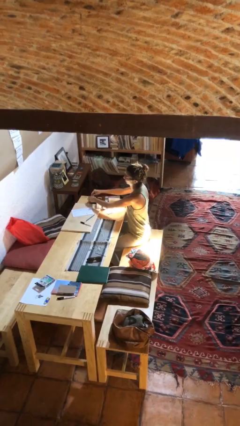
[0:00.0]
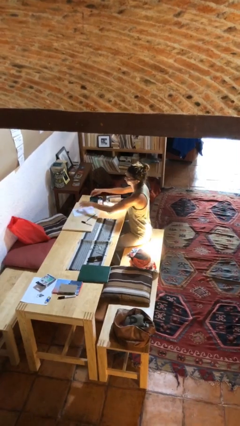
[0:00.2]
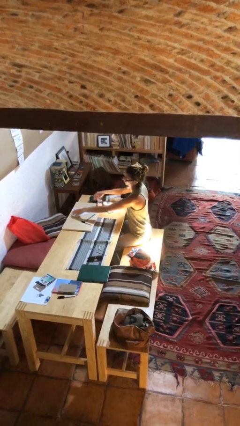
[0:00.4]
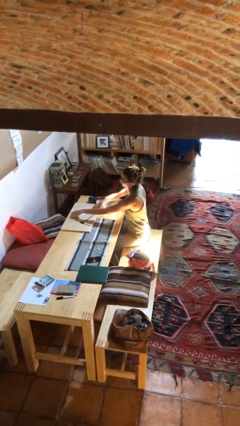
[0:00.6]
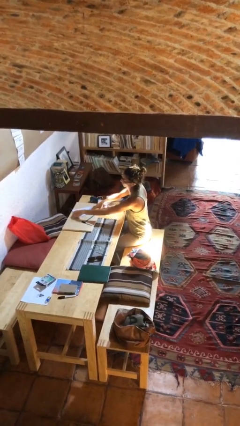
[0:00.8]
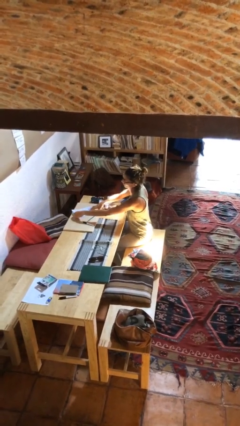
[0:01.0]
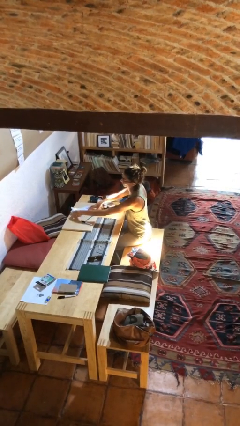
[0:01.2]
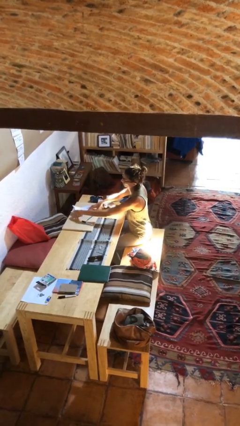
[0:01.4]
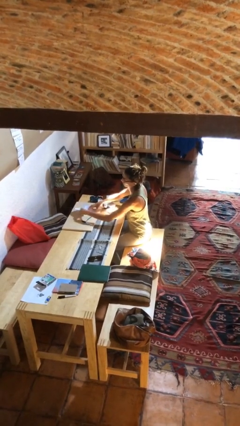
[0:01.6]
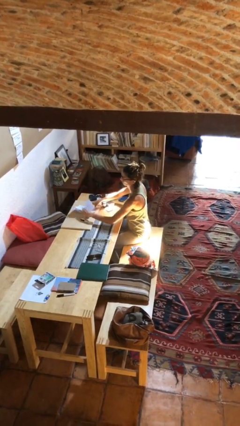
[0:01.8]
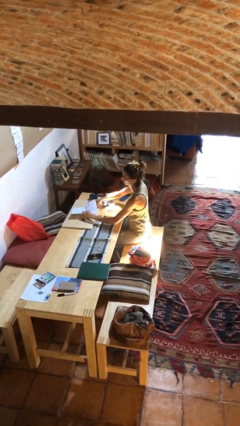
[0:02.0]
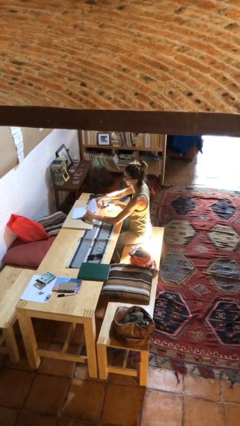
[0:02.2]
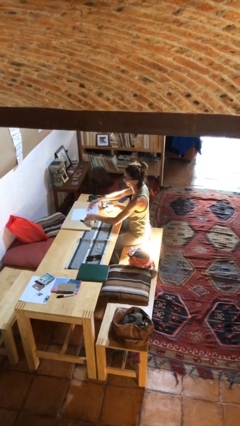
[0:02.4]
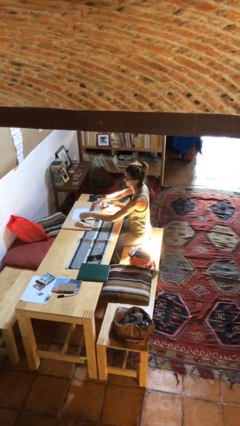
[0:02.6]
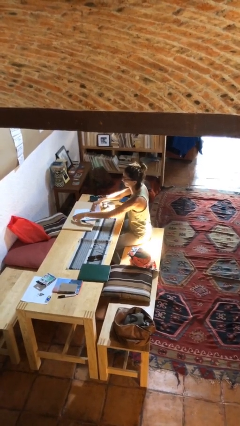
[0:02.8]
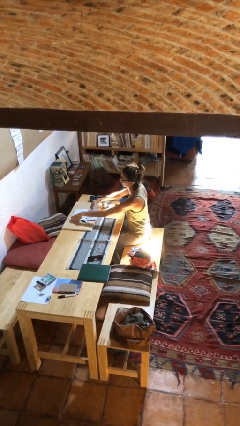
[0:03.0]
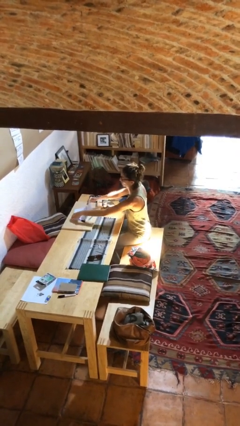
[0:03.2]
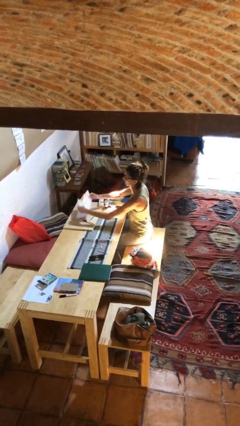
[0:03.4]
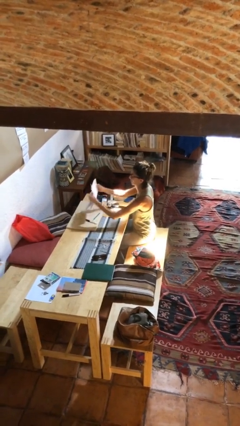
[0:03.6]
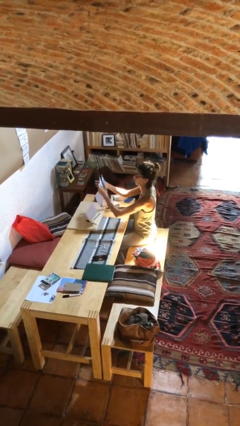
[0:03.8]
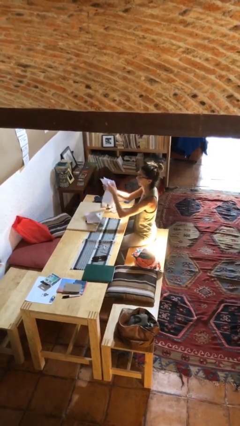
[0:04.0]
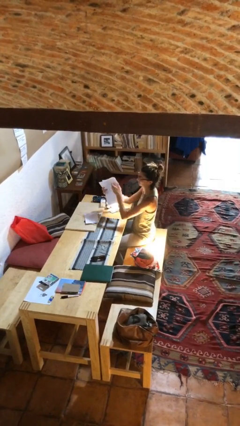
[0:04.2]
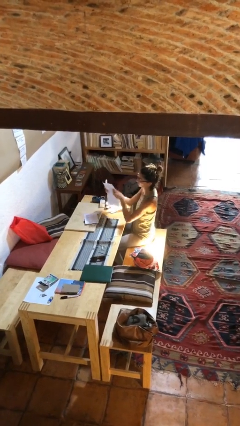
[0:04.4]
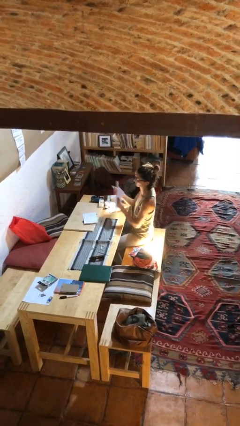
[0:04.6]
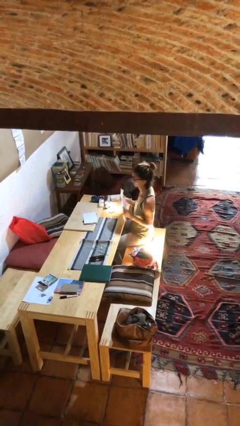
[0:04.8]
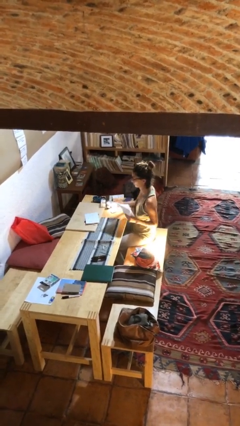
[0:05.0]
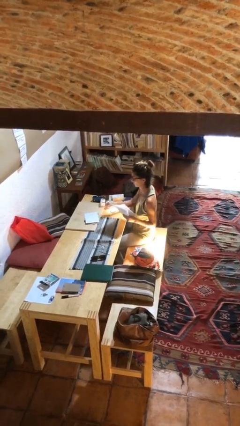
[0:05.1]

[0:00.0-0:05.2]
person picks up object from table

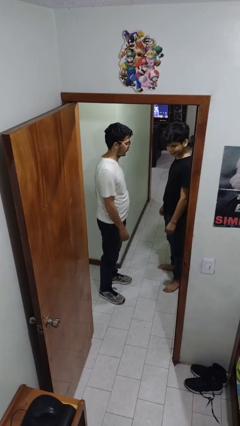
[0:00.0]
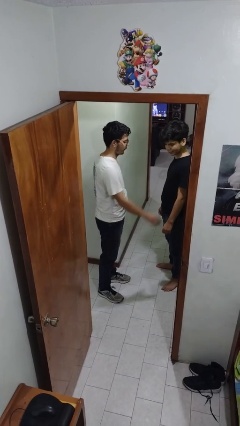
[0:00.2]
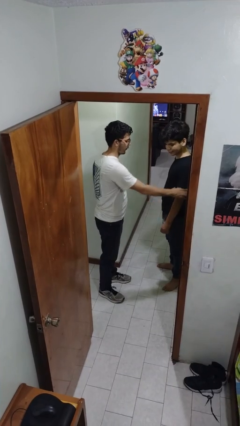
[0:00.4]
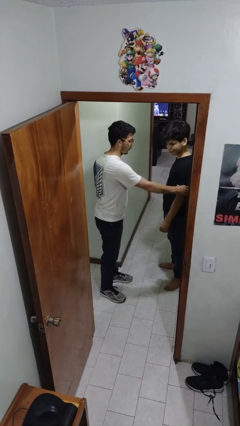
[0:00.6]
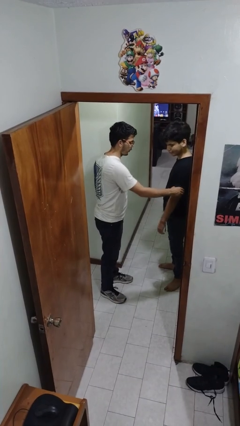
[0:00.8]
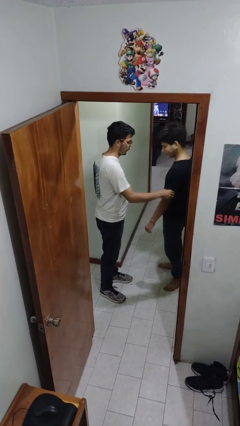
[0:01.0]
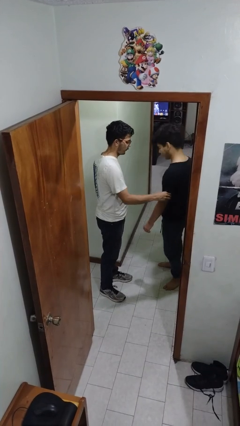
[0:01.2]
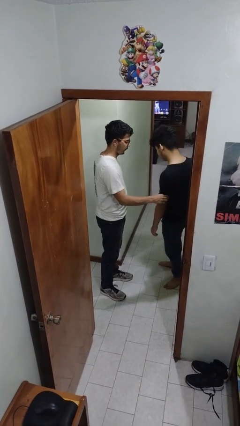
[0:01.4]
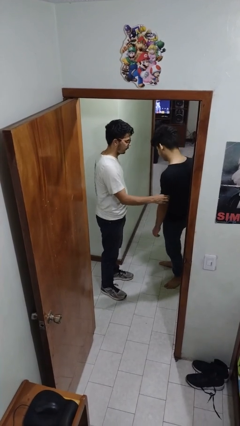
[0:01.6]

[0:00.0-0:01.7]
person grabs person by bicep

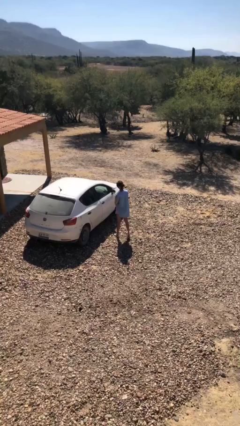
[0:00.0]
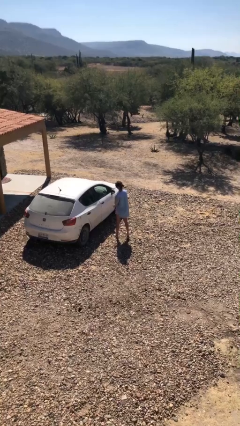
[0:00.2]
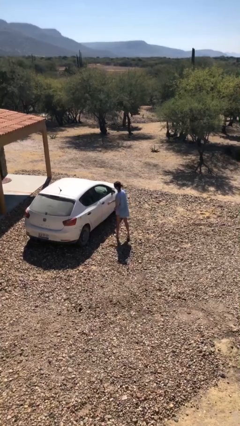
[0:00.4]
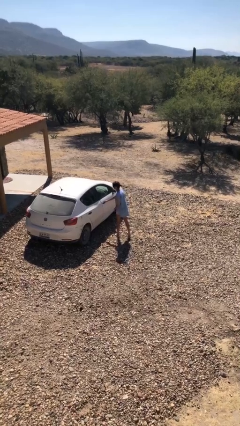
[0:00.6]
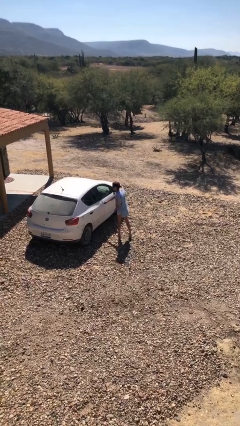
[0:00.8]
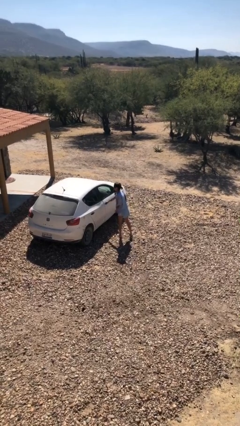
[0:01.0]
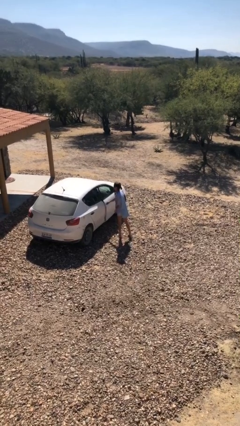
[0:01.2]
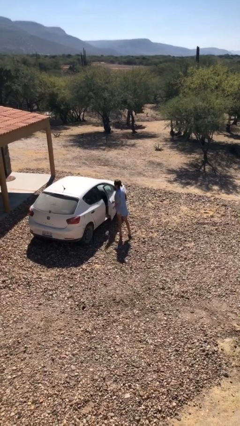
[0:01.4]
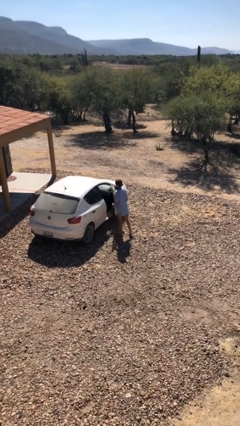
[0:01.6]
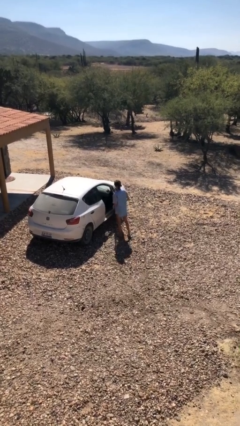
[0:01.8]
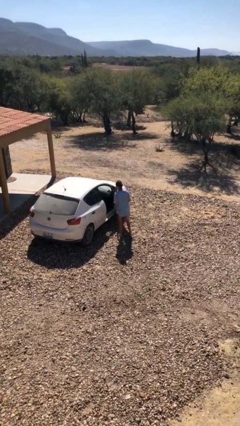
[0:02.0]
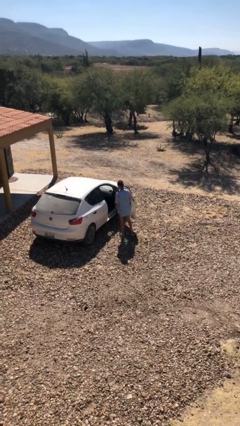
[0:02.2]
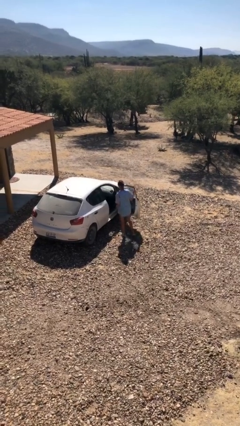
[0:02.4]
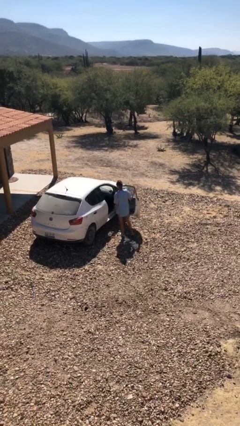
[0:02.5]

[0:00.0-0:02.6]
person opens car door

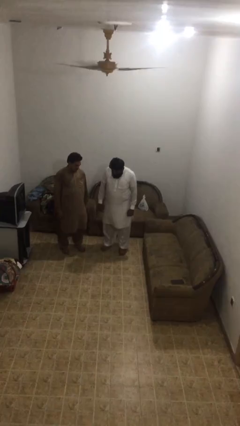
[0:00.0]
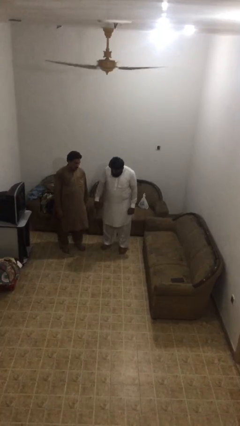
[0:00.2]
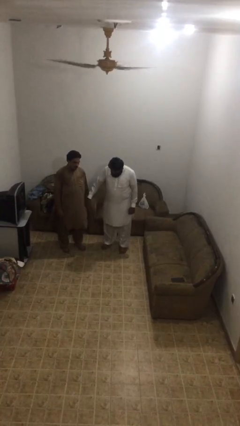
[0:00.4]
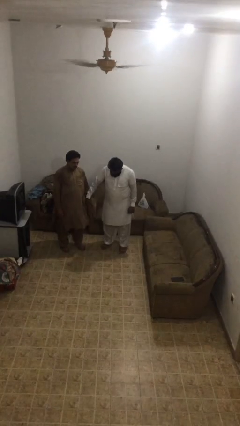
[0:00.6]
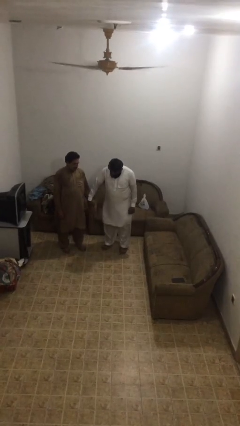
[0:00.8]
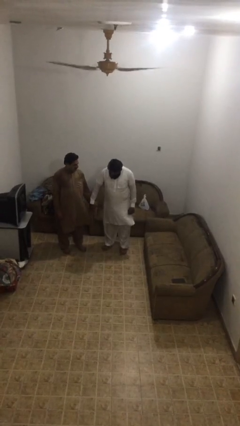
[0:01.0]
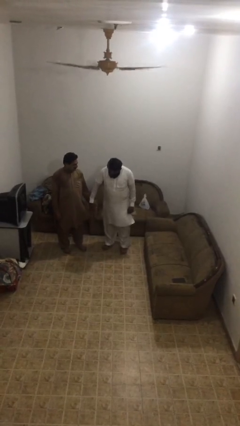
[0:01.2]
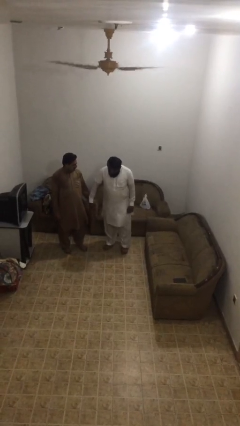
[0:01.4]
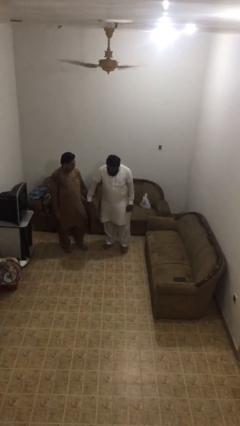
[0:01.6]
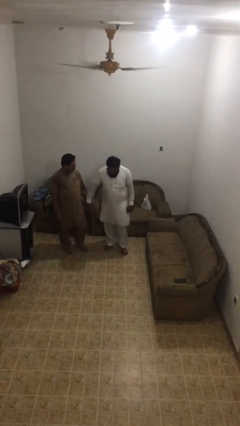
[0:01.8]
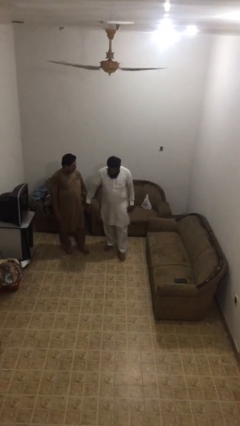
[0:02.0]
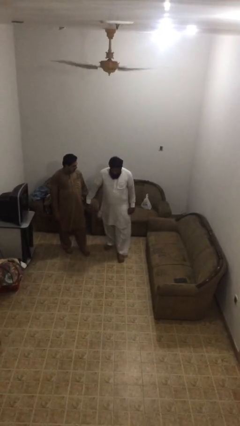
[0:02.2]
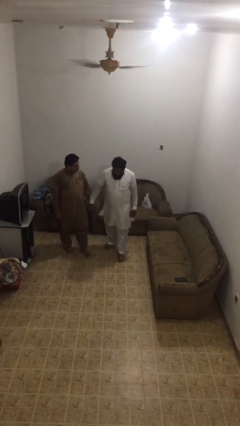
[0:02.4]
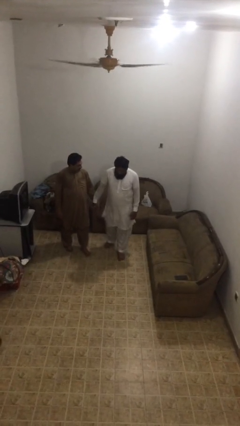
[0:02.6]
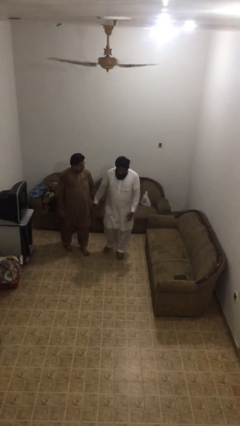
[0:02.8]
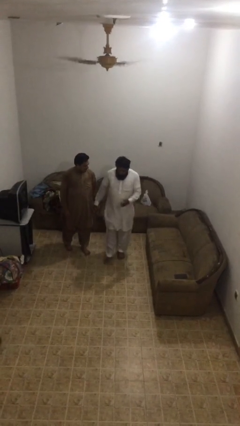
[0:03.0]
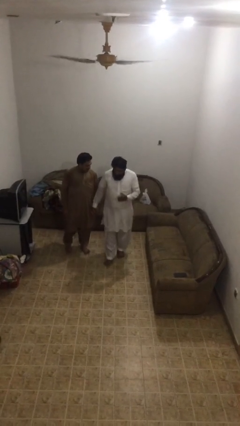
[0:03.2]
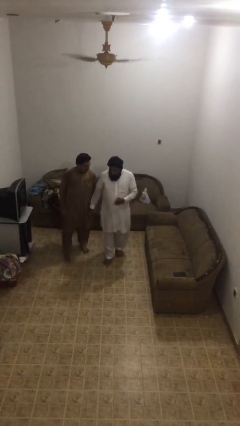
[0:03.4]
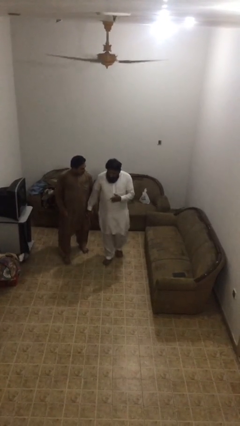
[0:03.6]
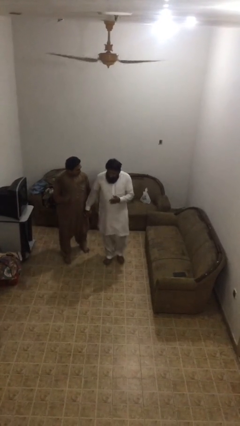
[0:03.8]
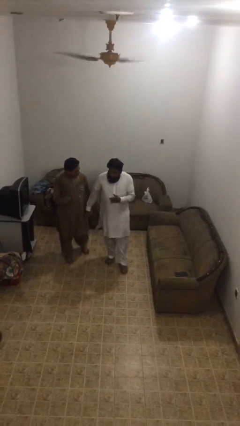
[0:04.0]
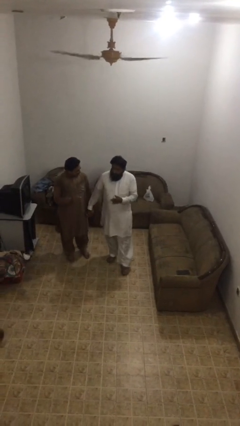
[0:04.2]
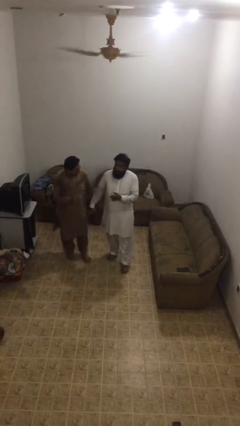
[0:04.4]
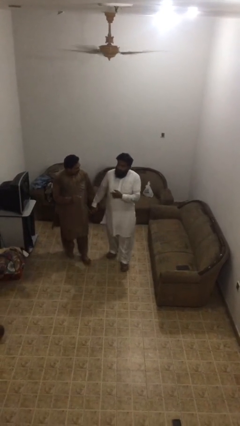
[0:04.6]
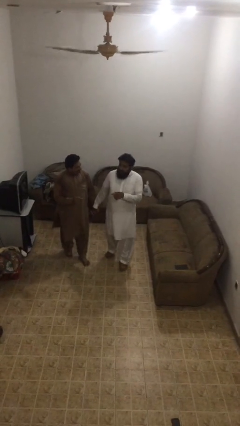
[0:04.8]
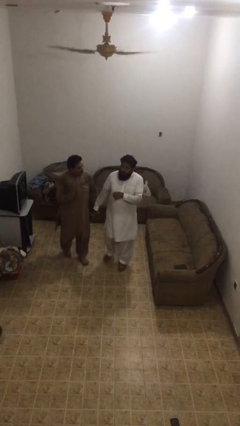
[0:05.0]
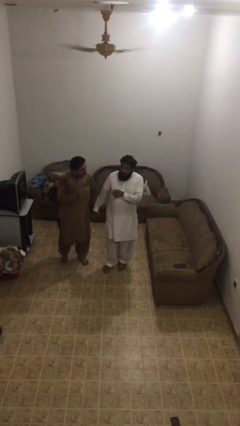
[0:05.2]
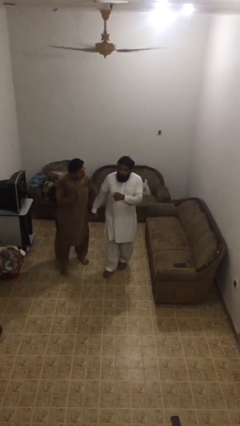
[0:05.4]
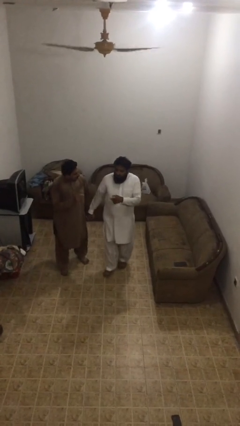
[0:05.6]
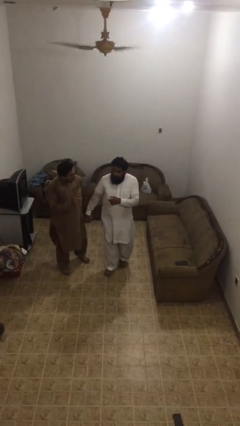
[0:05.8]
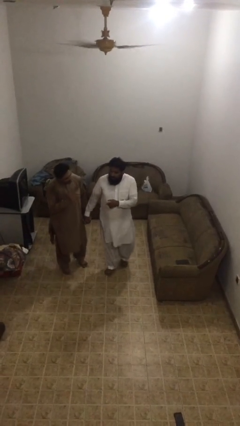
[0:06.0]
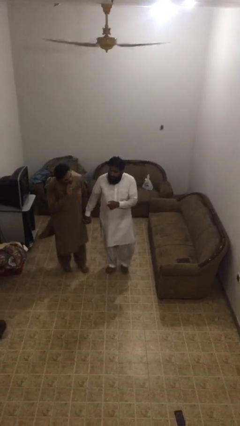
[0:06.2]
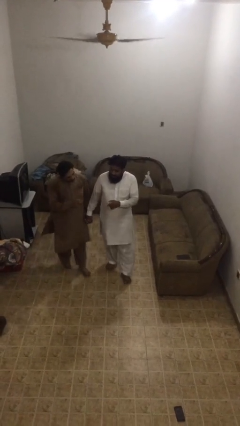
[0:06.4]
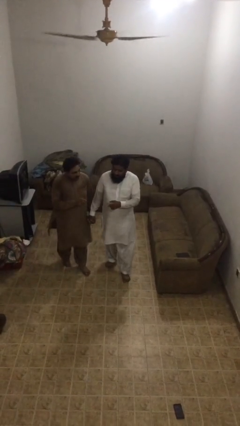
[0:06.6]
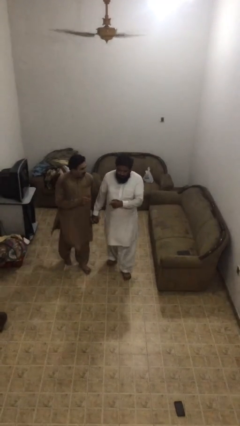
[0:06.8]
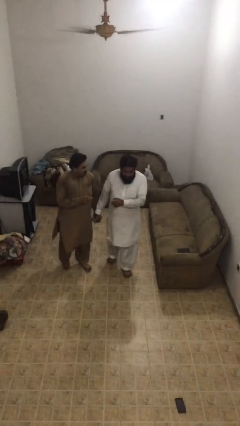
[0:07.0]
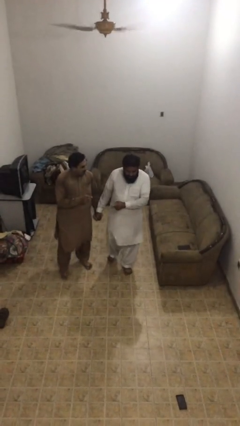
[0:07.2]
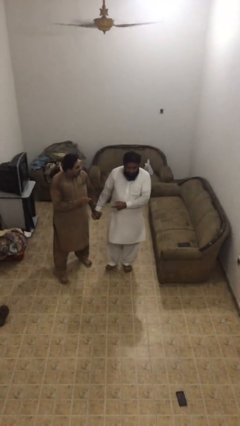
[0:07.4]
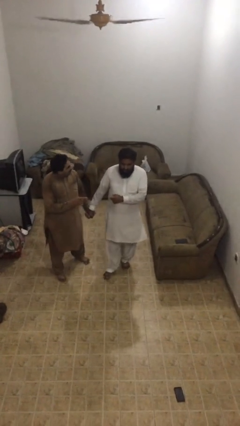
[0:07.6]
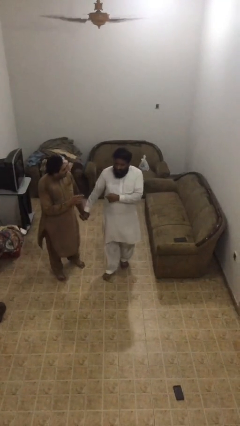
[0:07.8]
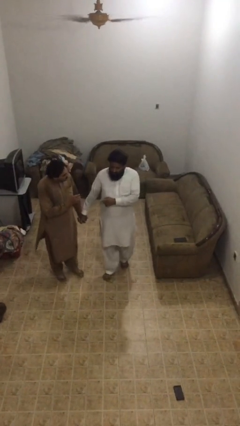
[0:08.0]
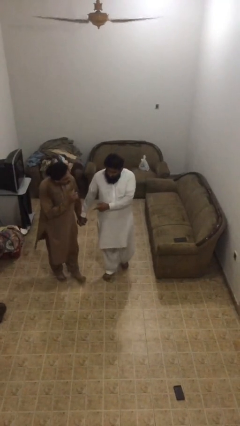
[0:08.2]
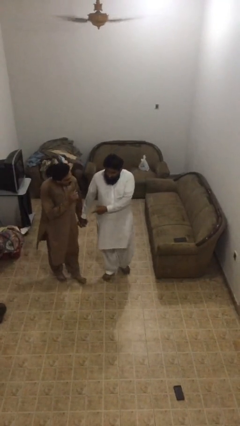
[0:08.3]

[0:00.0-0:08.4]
person holds hand
